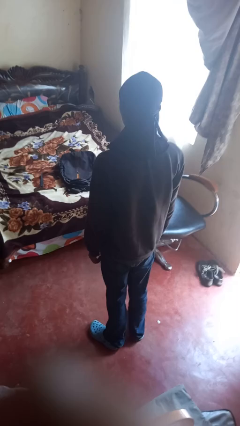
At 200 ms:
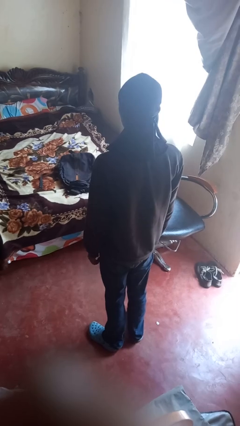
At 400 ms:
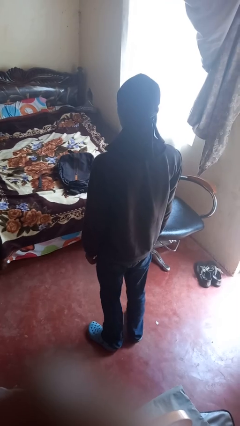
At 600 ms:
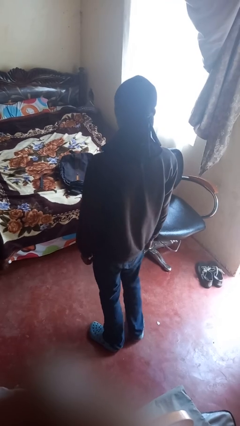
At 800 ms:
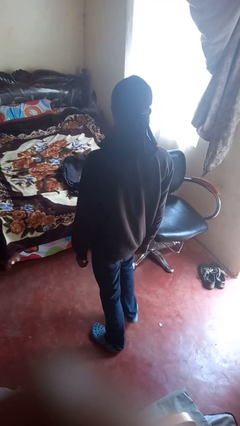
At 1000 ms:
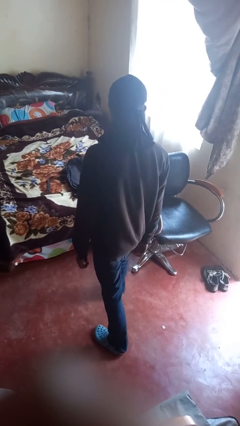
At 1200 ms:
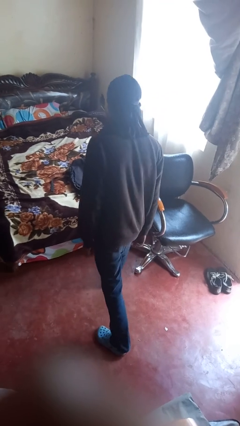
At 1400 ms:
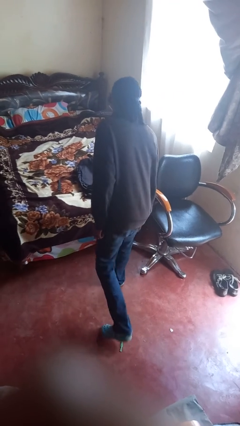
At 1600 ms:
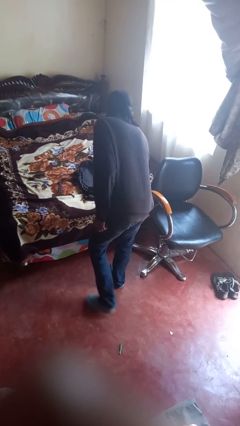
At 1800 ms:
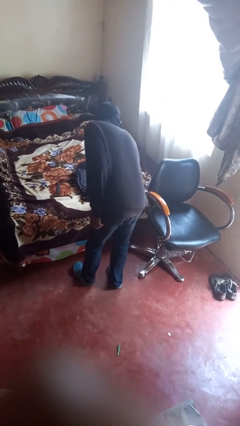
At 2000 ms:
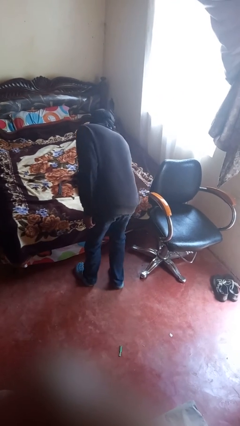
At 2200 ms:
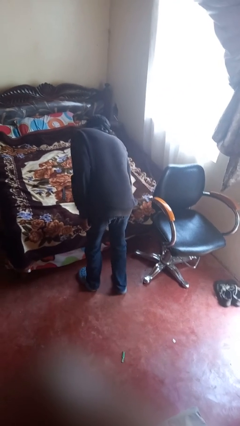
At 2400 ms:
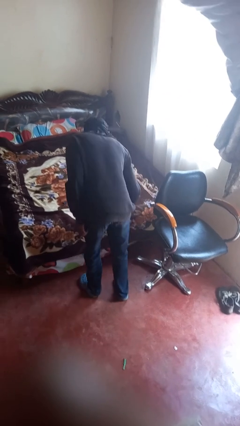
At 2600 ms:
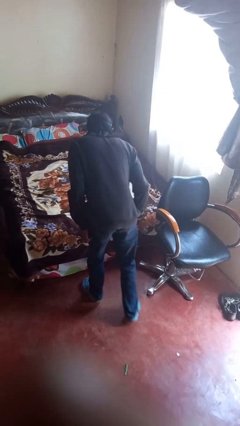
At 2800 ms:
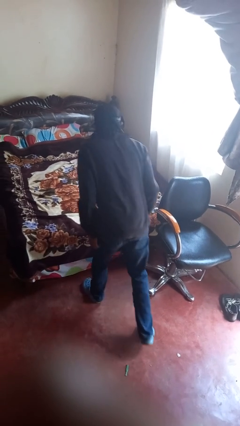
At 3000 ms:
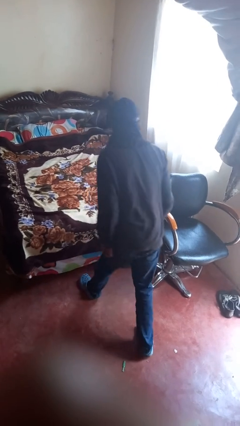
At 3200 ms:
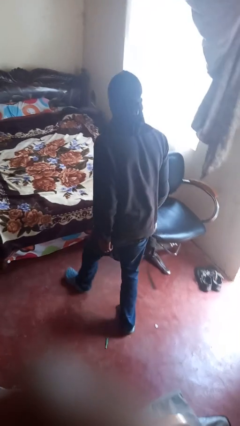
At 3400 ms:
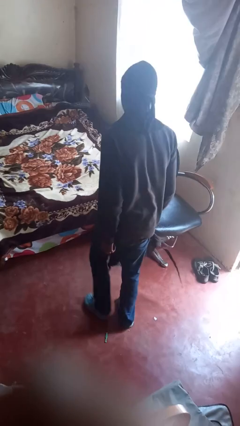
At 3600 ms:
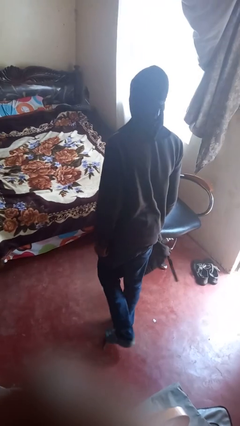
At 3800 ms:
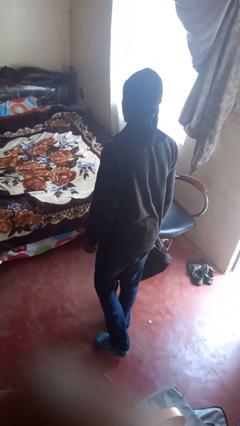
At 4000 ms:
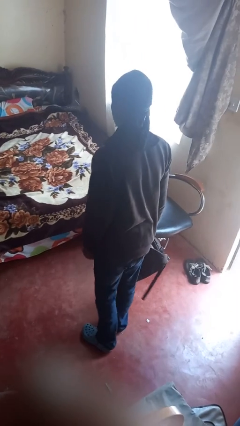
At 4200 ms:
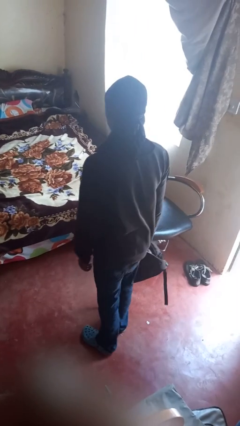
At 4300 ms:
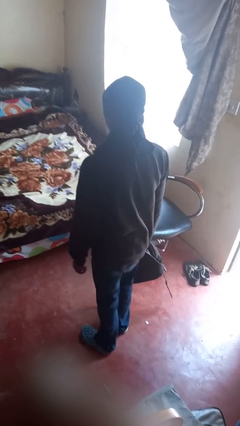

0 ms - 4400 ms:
person picks up object from bed

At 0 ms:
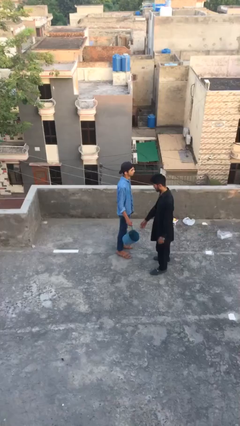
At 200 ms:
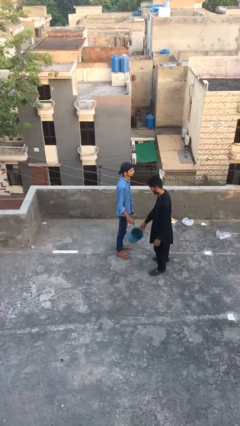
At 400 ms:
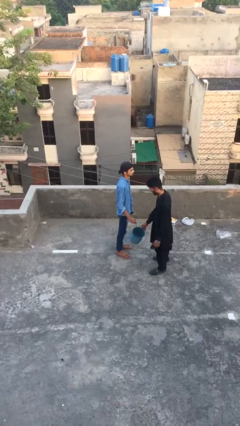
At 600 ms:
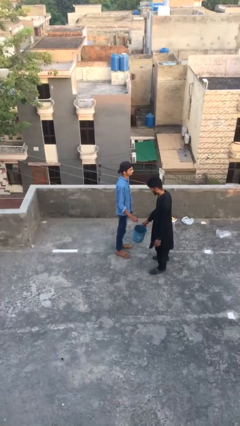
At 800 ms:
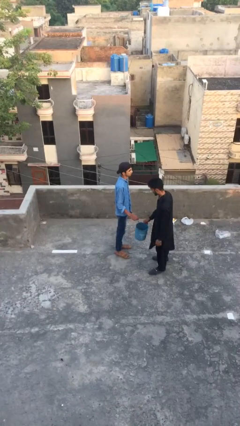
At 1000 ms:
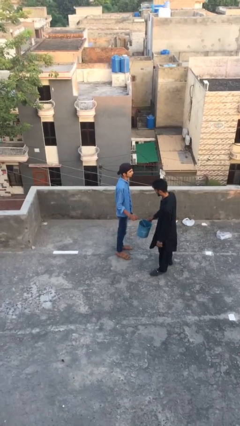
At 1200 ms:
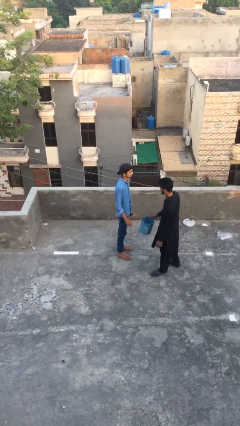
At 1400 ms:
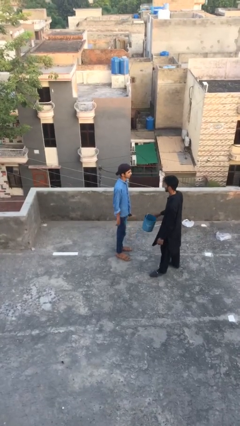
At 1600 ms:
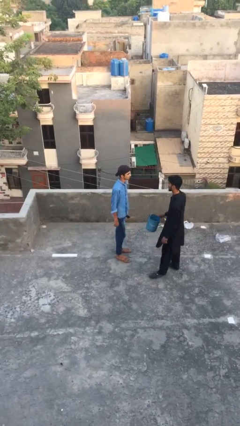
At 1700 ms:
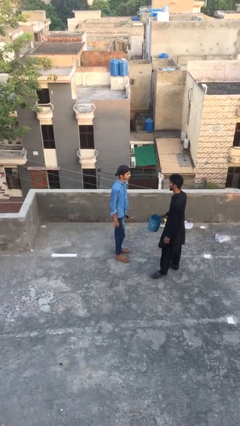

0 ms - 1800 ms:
person transfers object to person

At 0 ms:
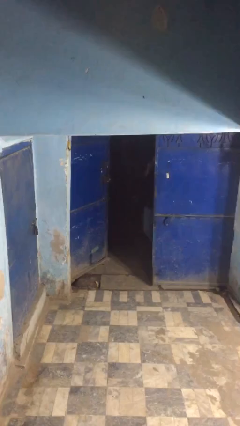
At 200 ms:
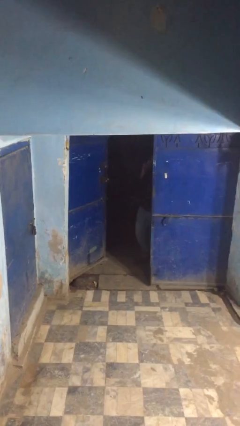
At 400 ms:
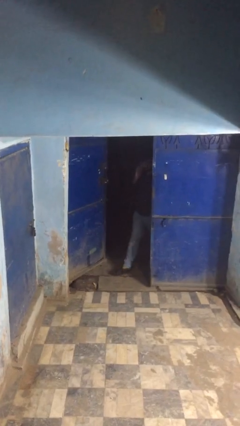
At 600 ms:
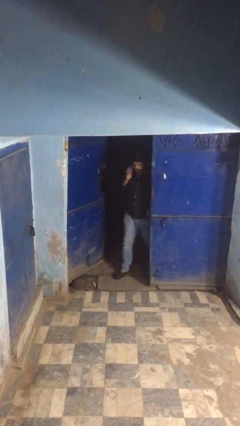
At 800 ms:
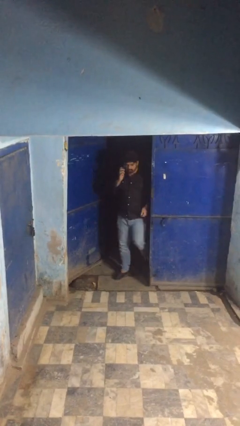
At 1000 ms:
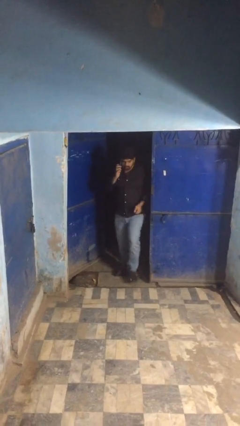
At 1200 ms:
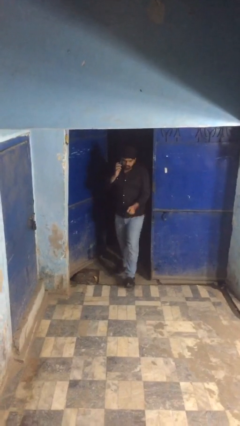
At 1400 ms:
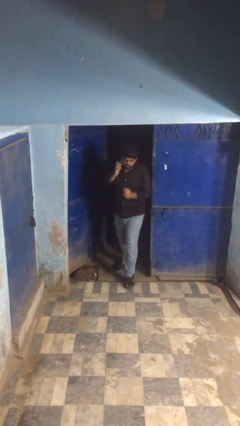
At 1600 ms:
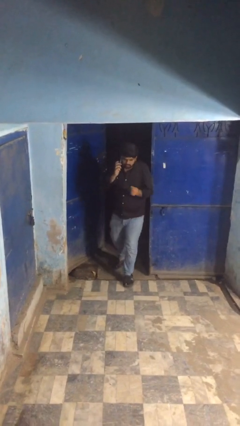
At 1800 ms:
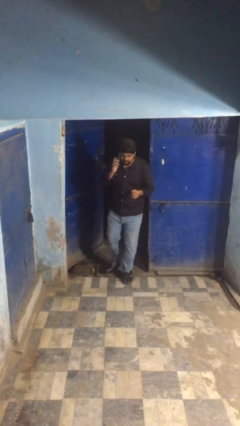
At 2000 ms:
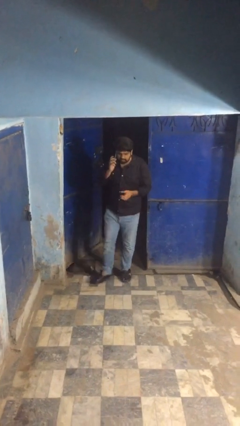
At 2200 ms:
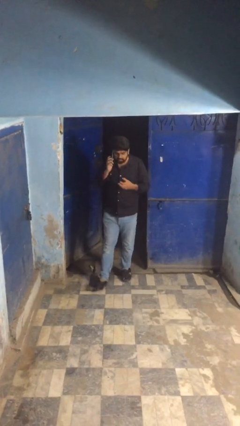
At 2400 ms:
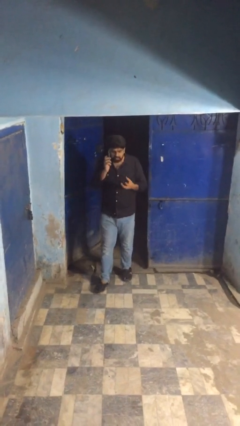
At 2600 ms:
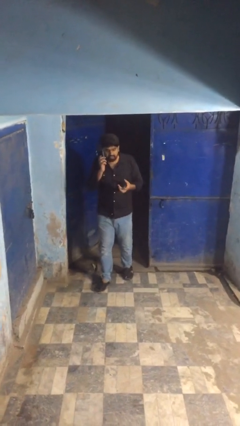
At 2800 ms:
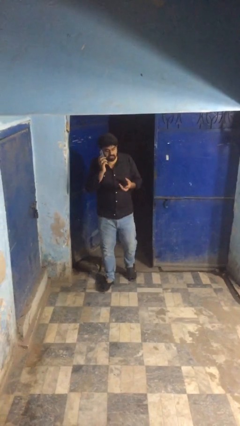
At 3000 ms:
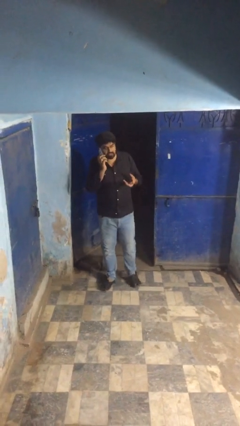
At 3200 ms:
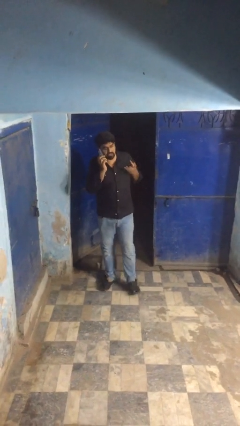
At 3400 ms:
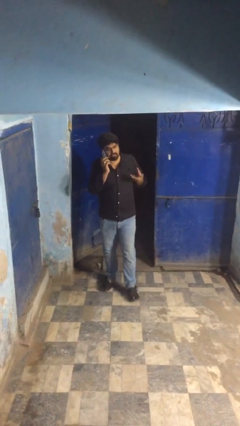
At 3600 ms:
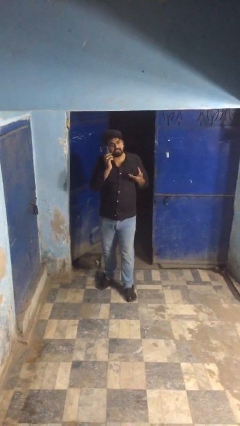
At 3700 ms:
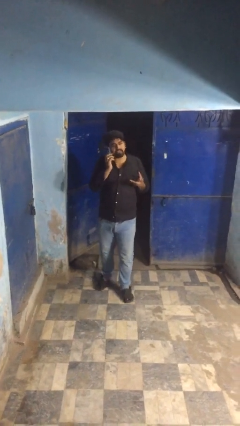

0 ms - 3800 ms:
person enters scene through structure

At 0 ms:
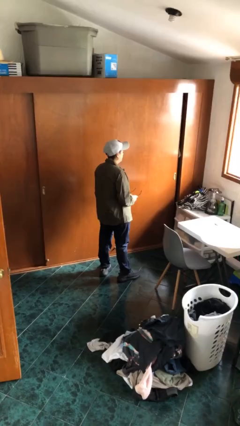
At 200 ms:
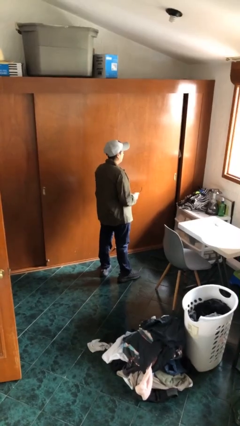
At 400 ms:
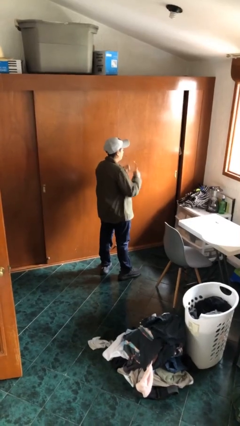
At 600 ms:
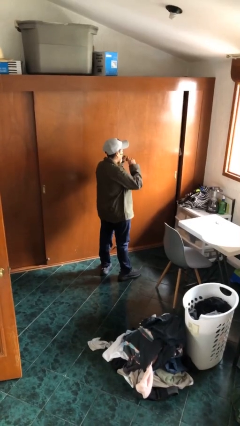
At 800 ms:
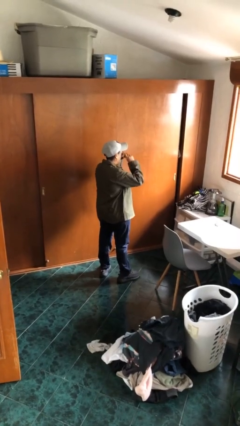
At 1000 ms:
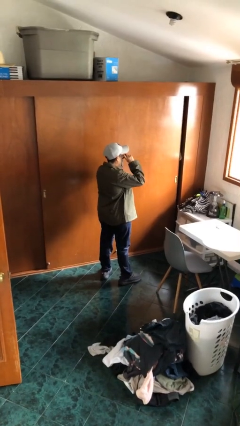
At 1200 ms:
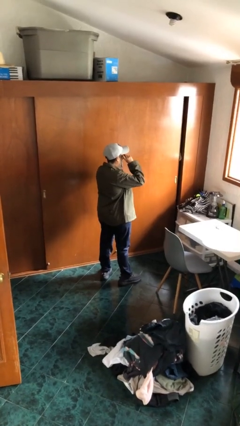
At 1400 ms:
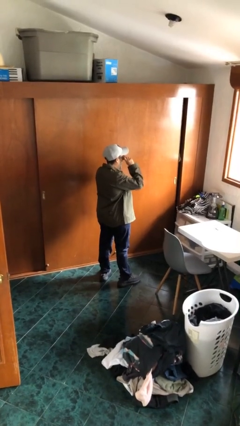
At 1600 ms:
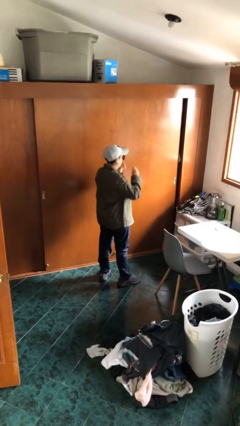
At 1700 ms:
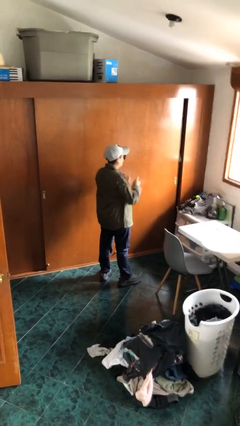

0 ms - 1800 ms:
person puts on sunglasses

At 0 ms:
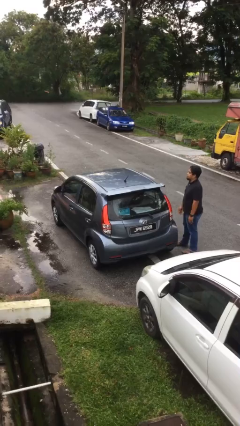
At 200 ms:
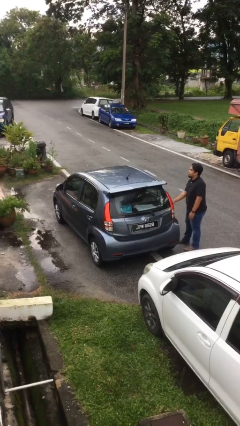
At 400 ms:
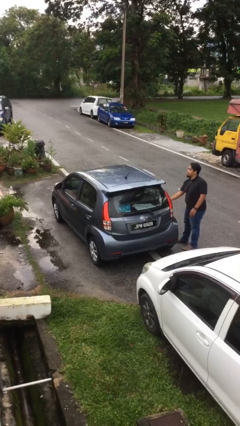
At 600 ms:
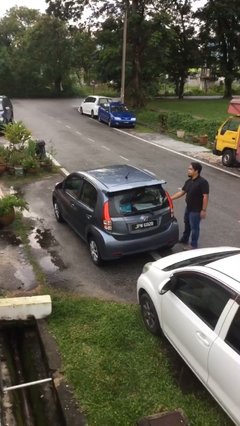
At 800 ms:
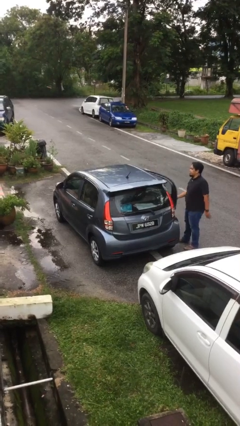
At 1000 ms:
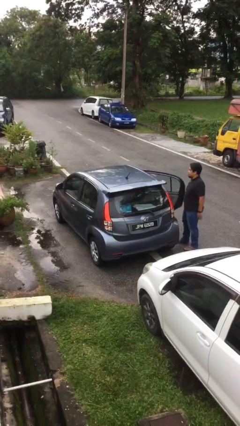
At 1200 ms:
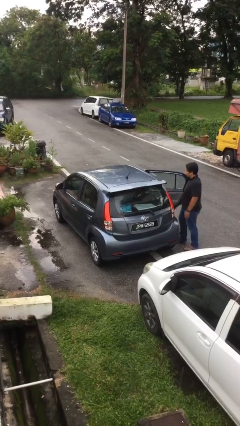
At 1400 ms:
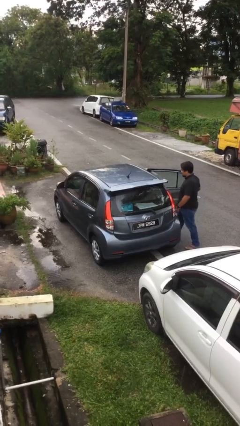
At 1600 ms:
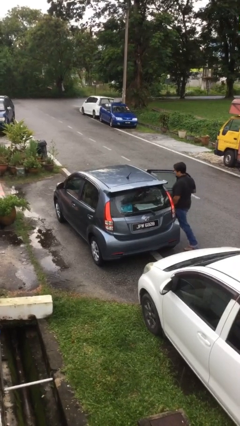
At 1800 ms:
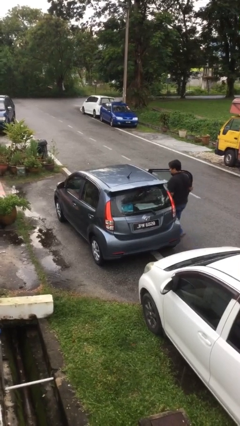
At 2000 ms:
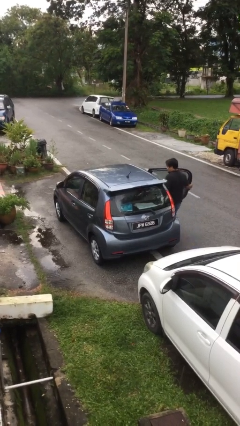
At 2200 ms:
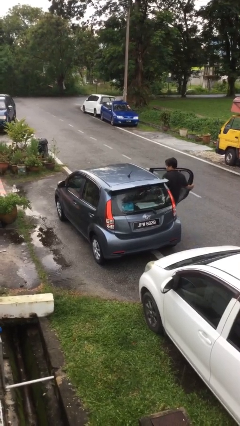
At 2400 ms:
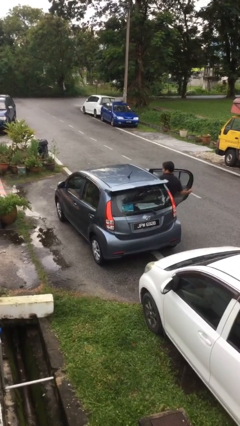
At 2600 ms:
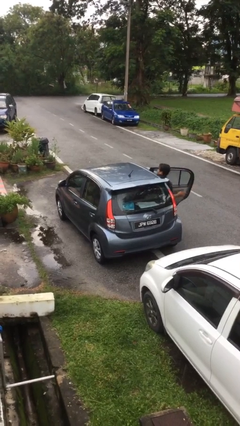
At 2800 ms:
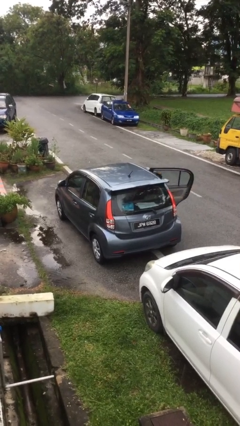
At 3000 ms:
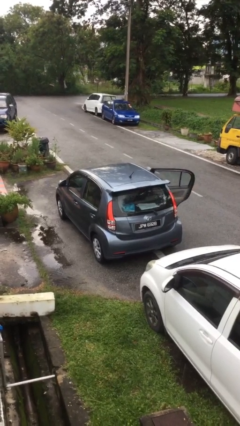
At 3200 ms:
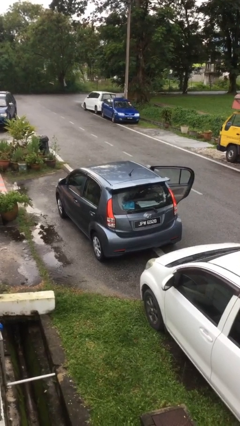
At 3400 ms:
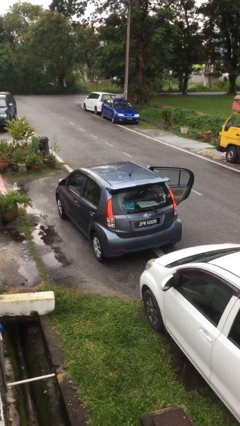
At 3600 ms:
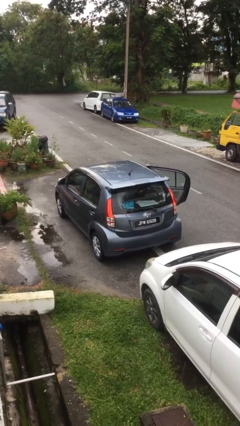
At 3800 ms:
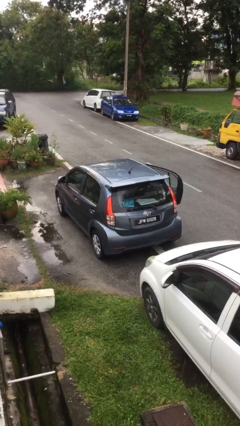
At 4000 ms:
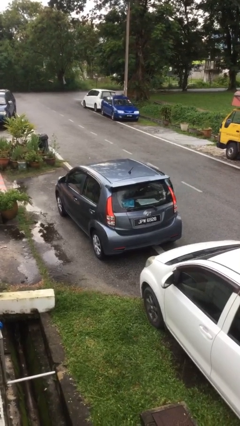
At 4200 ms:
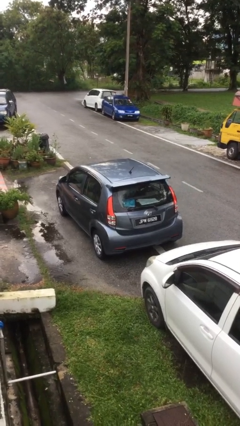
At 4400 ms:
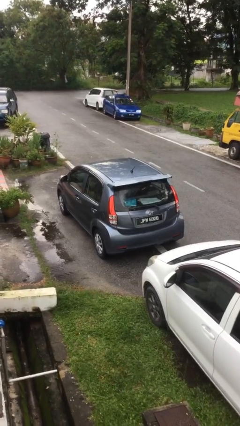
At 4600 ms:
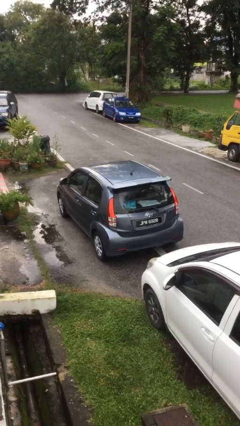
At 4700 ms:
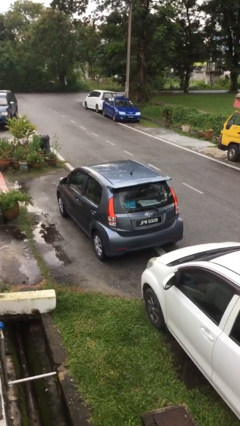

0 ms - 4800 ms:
car picks up person

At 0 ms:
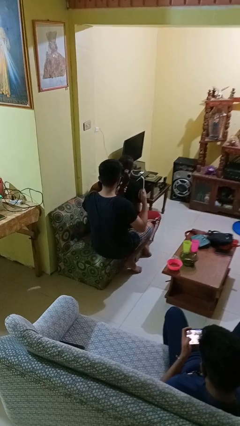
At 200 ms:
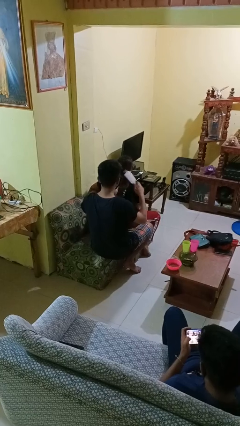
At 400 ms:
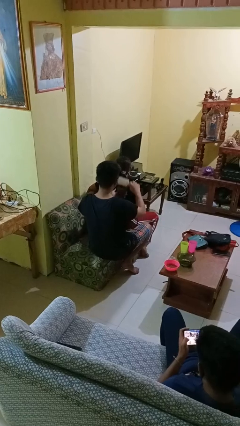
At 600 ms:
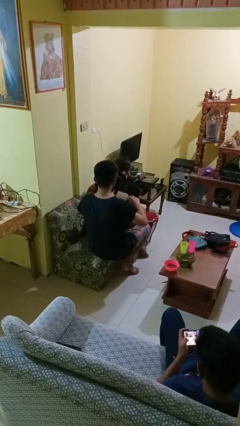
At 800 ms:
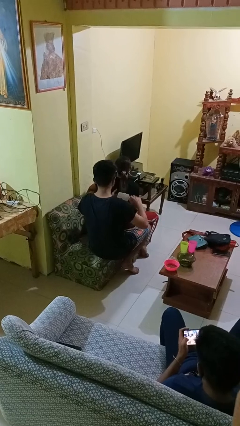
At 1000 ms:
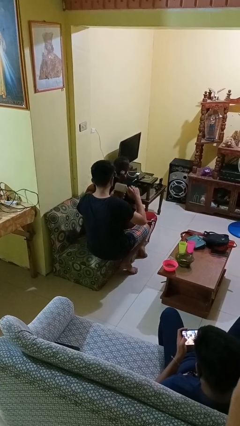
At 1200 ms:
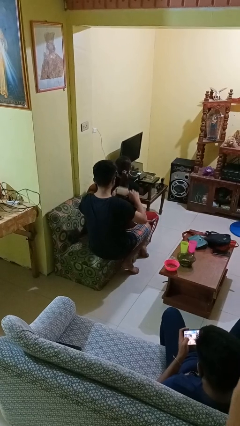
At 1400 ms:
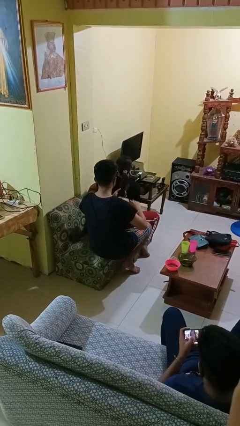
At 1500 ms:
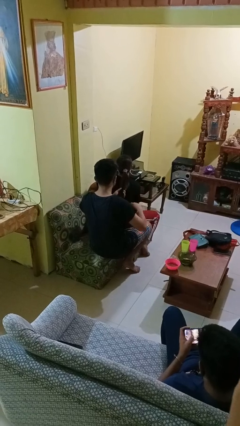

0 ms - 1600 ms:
person brushes hair of person
